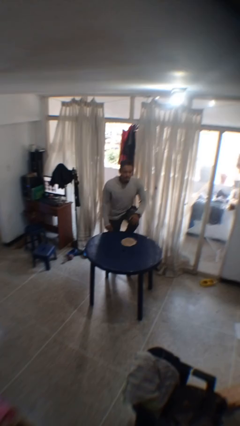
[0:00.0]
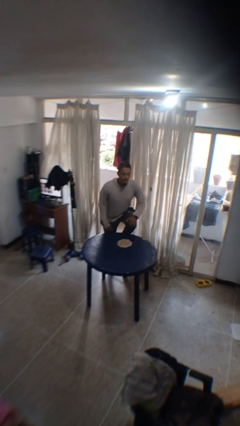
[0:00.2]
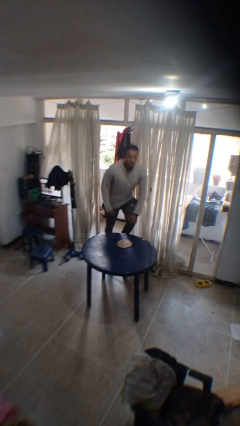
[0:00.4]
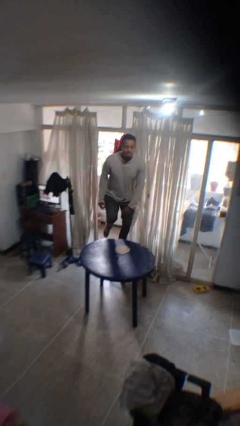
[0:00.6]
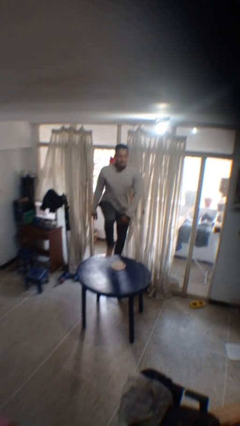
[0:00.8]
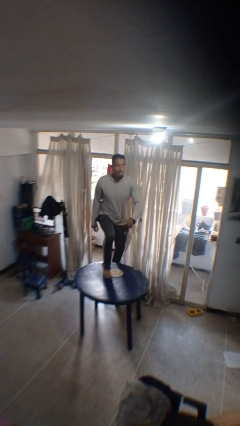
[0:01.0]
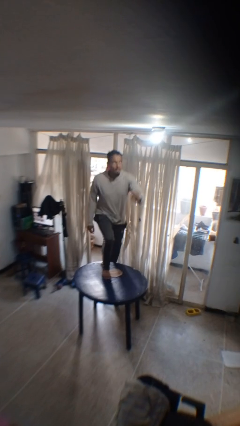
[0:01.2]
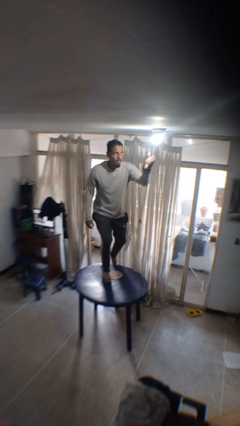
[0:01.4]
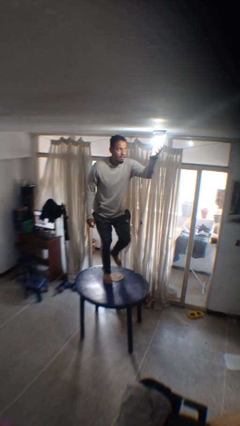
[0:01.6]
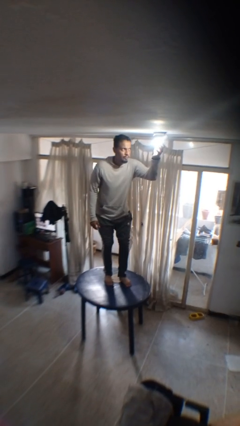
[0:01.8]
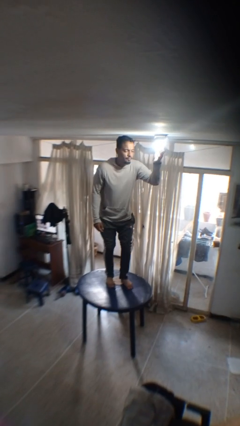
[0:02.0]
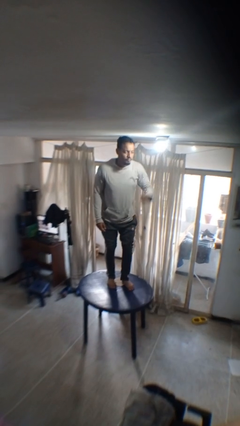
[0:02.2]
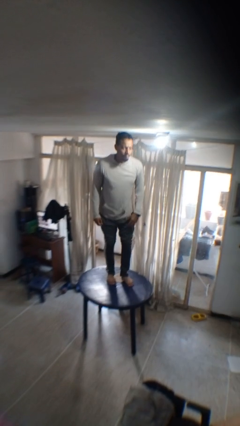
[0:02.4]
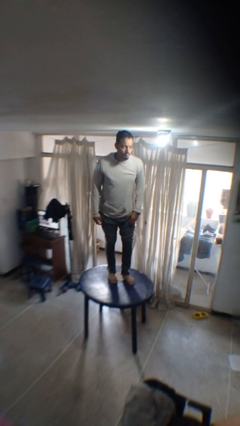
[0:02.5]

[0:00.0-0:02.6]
person climbs on table

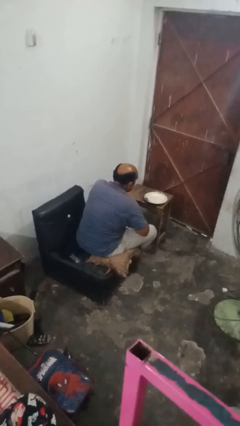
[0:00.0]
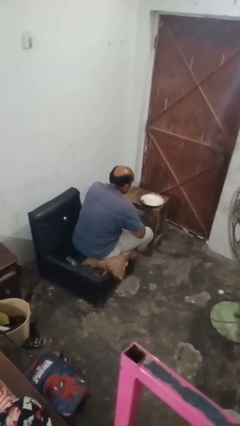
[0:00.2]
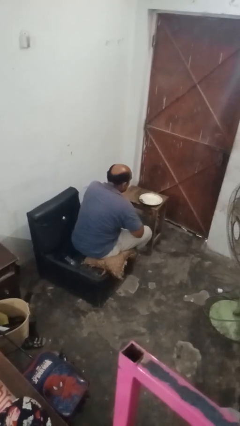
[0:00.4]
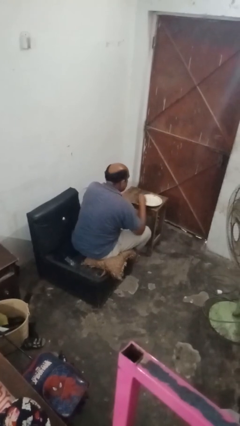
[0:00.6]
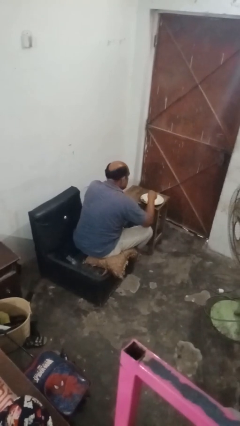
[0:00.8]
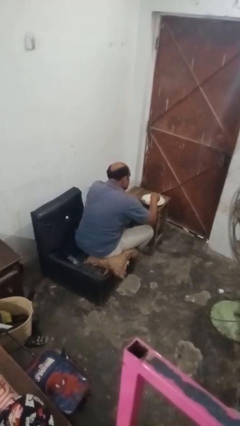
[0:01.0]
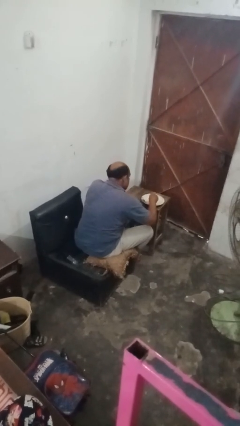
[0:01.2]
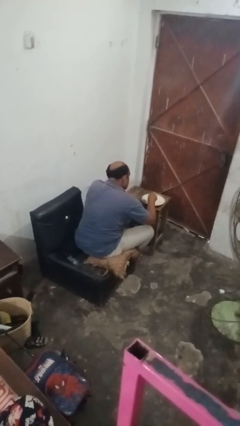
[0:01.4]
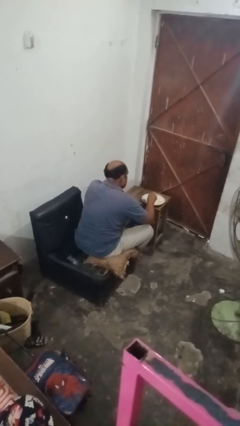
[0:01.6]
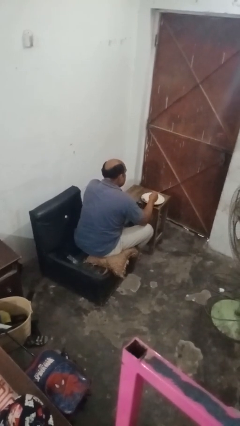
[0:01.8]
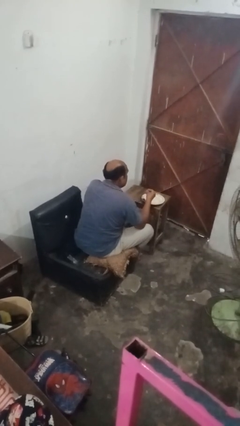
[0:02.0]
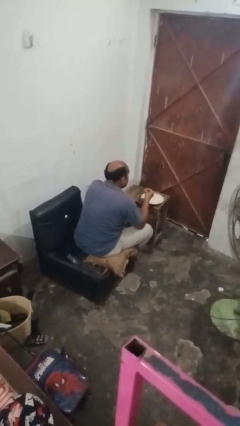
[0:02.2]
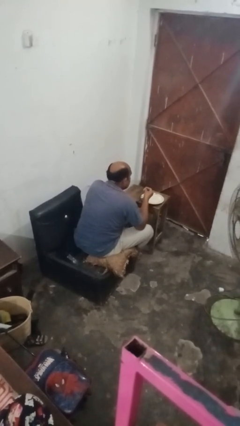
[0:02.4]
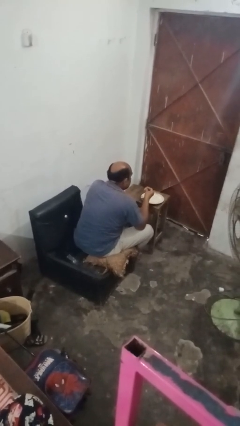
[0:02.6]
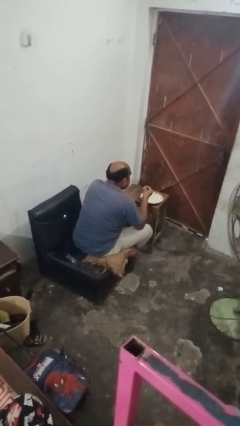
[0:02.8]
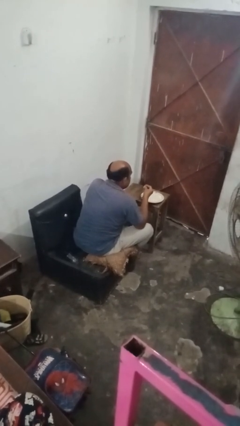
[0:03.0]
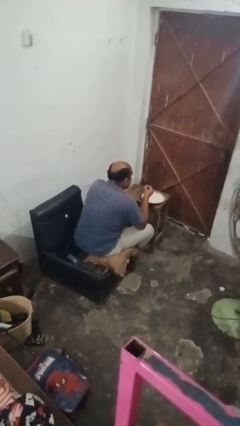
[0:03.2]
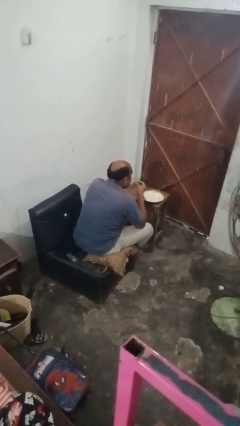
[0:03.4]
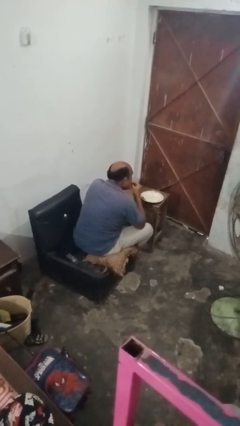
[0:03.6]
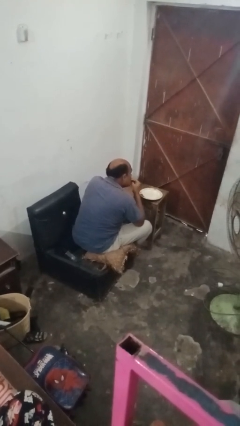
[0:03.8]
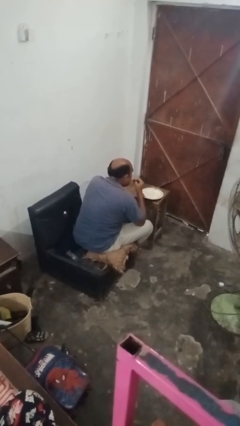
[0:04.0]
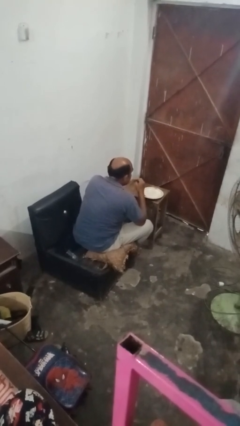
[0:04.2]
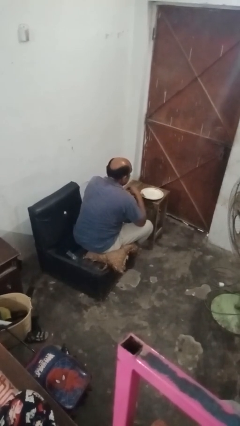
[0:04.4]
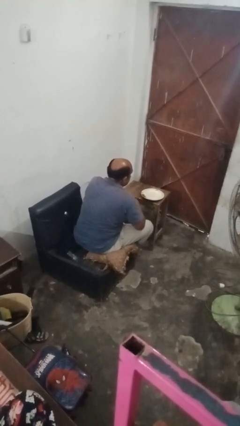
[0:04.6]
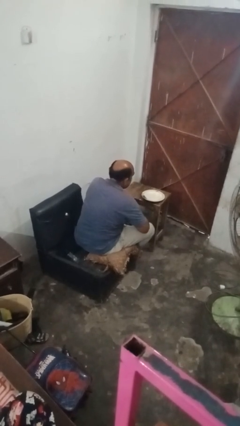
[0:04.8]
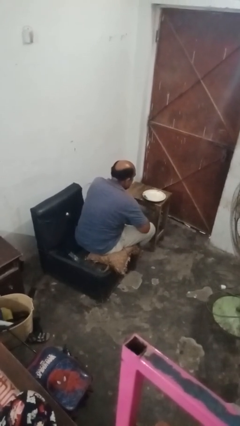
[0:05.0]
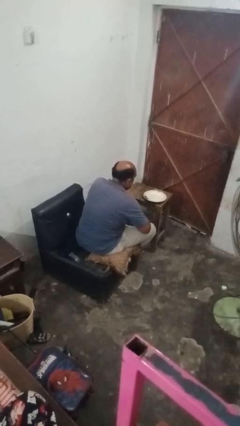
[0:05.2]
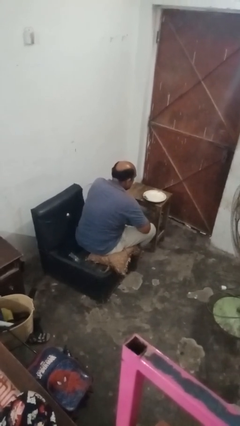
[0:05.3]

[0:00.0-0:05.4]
person eats with hands

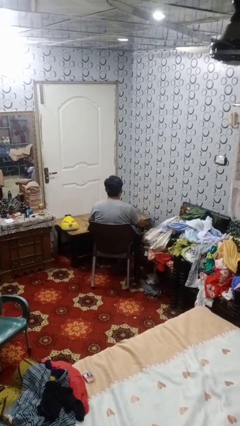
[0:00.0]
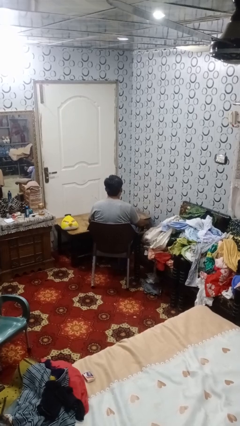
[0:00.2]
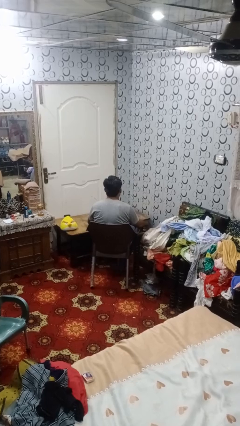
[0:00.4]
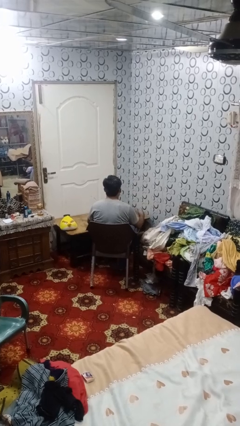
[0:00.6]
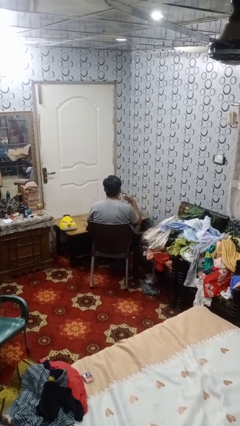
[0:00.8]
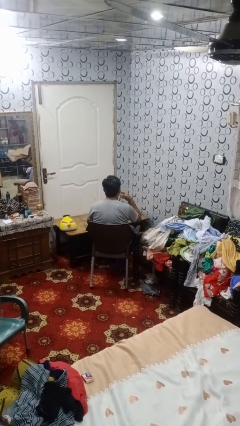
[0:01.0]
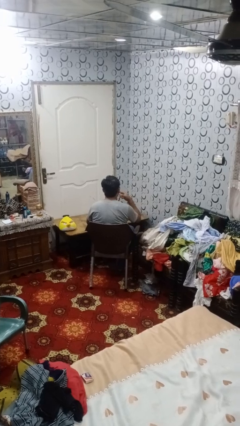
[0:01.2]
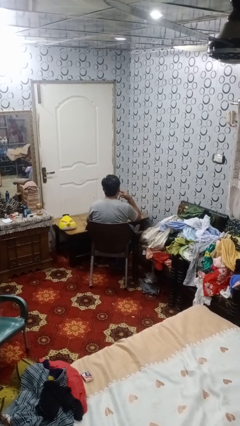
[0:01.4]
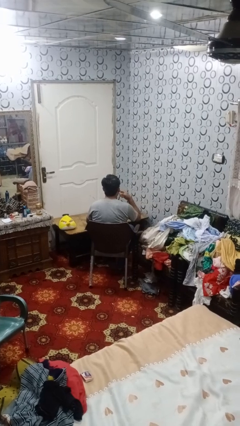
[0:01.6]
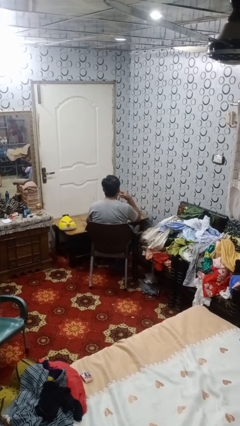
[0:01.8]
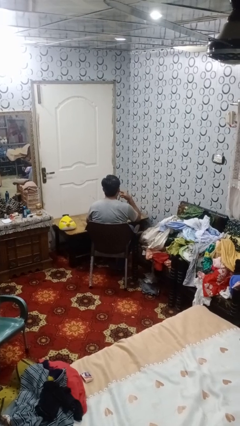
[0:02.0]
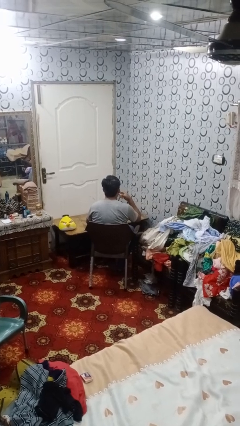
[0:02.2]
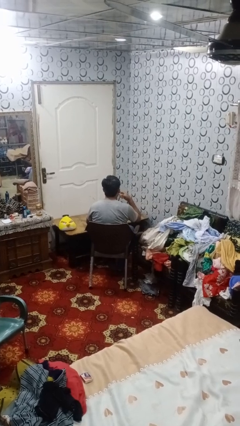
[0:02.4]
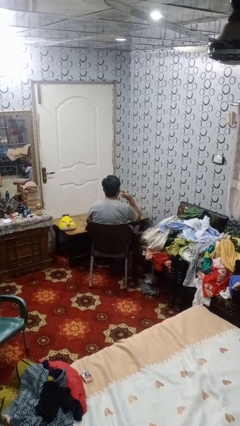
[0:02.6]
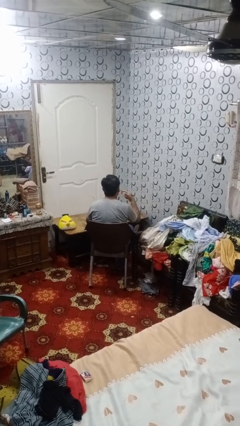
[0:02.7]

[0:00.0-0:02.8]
person licks fingers

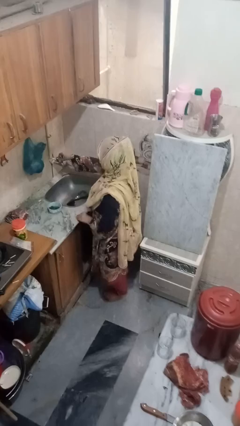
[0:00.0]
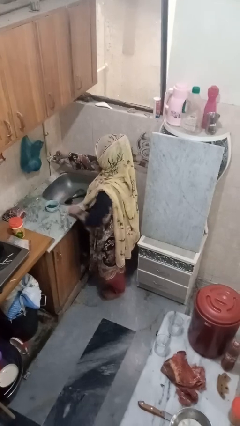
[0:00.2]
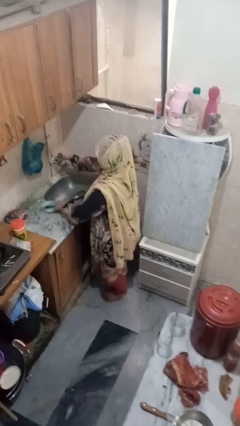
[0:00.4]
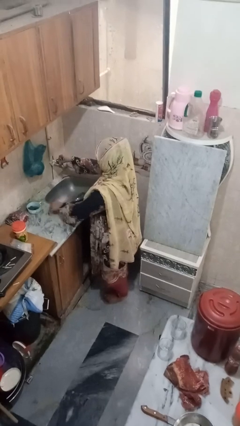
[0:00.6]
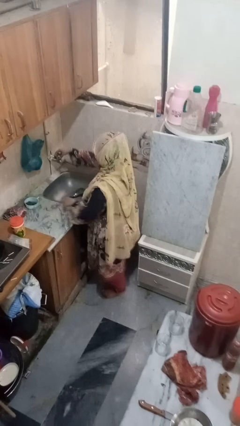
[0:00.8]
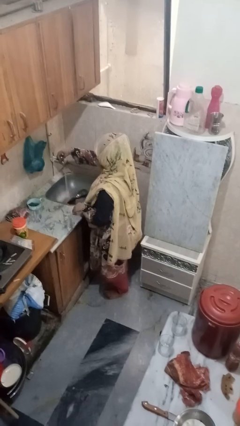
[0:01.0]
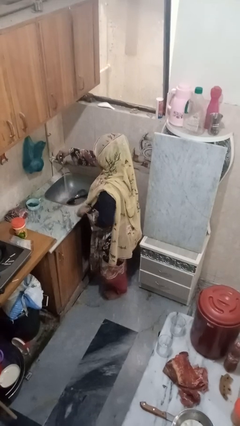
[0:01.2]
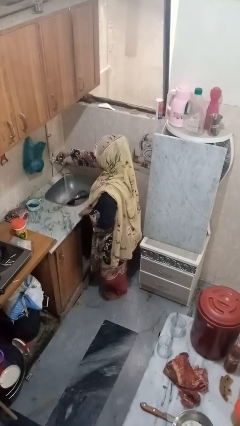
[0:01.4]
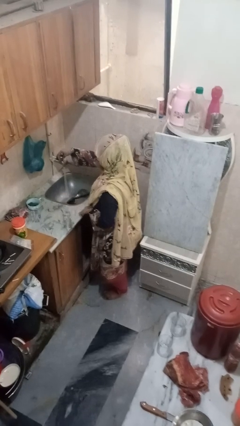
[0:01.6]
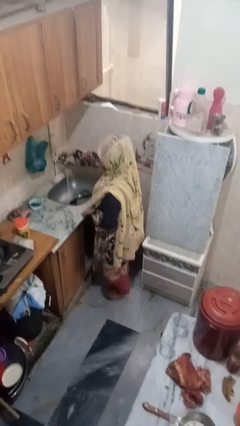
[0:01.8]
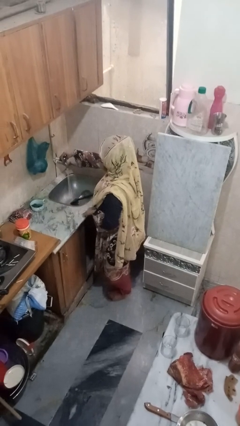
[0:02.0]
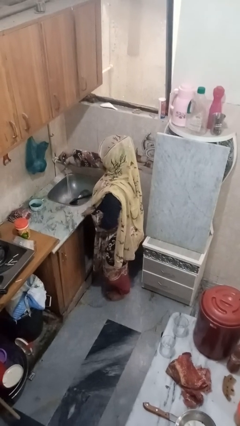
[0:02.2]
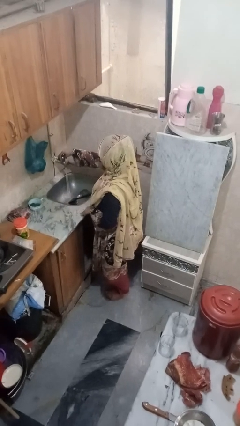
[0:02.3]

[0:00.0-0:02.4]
person turns on faucet

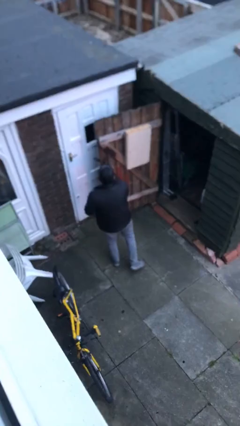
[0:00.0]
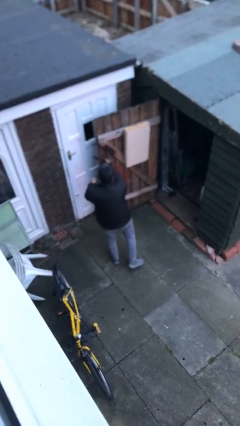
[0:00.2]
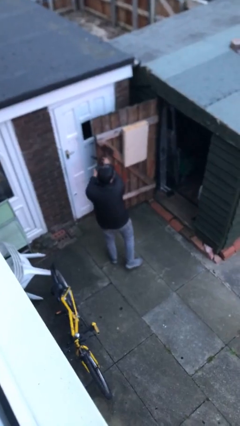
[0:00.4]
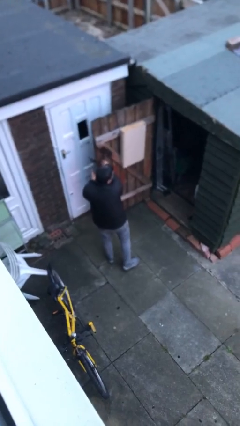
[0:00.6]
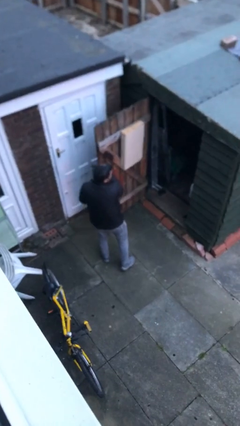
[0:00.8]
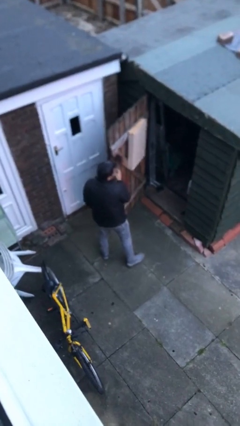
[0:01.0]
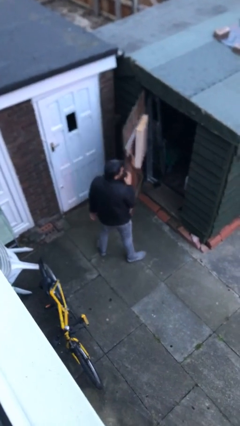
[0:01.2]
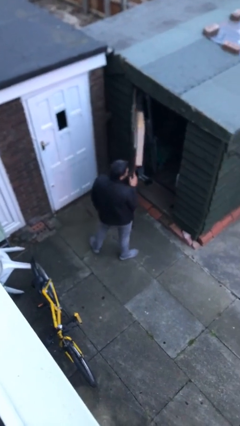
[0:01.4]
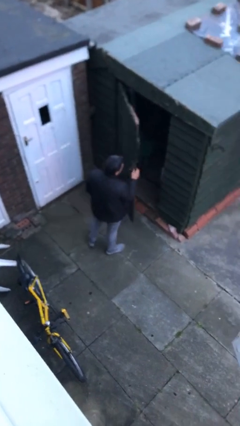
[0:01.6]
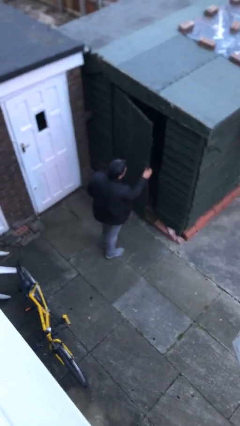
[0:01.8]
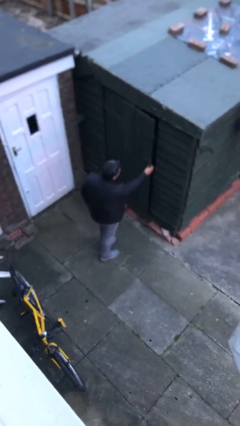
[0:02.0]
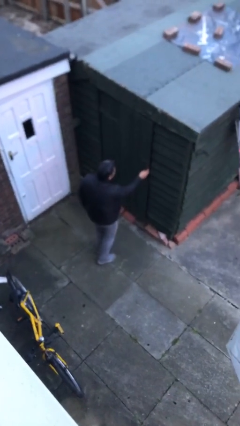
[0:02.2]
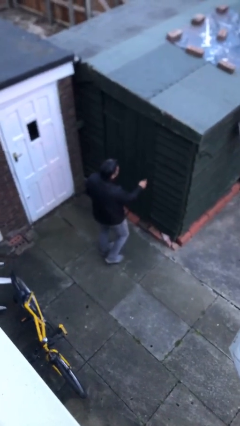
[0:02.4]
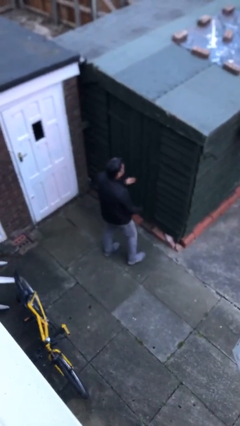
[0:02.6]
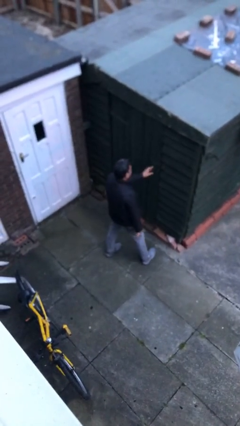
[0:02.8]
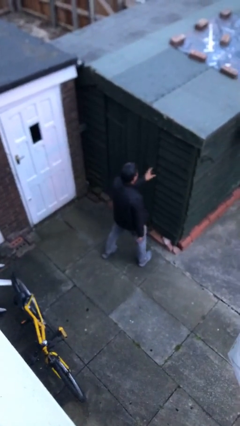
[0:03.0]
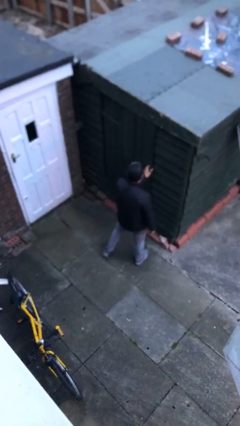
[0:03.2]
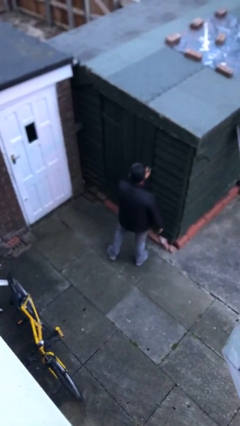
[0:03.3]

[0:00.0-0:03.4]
person closes facility door

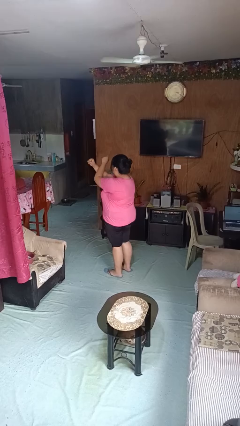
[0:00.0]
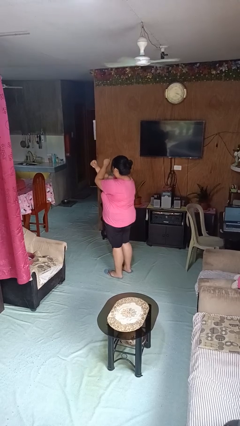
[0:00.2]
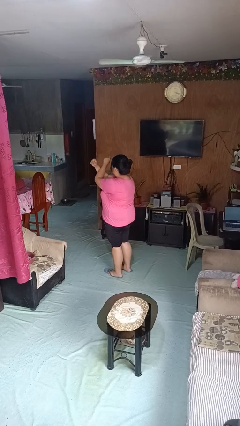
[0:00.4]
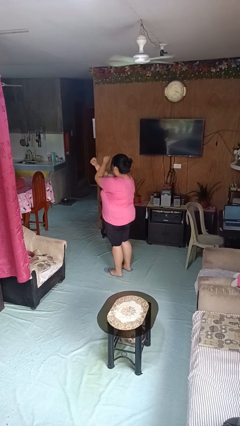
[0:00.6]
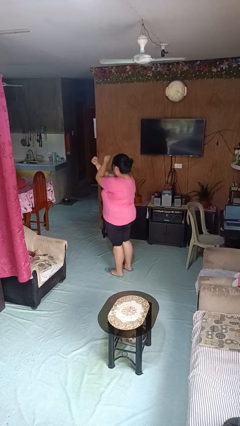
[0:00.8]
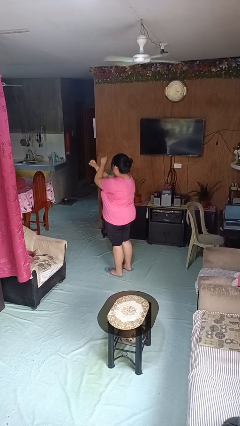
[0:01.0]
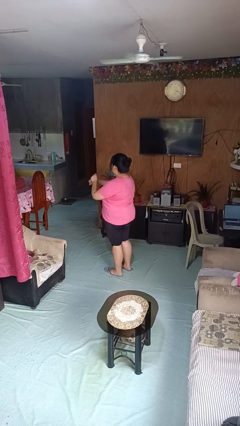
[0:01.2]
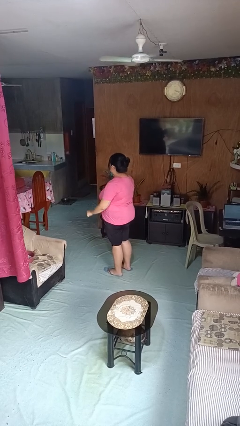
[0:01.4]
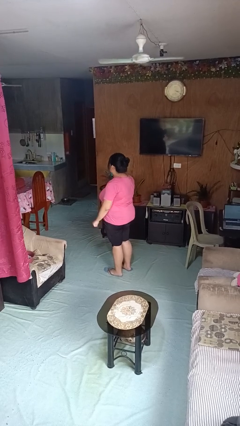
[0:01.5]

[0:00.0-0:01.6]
person gestures arms x
